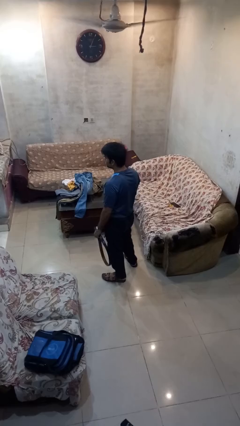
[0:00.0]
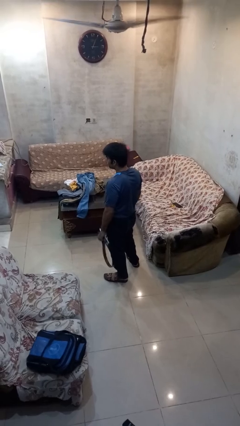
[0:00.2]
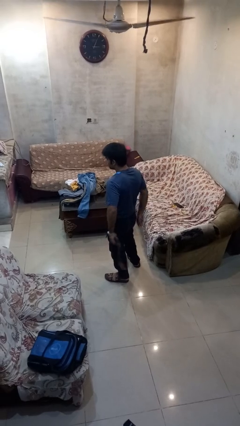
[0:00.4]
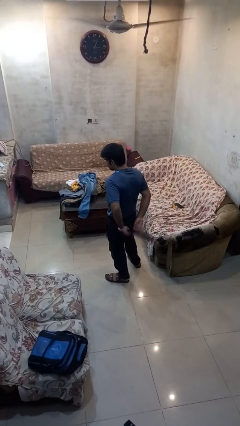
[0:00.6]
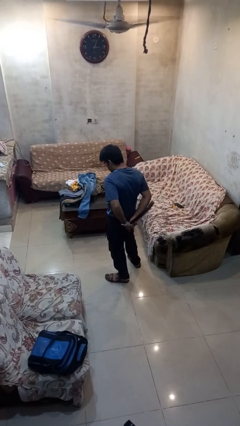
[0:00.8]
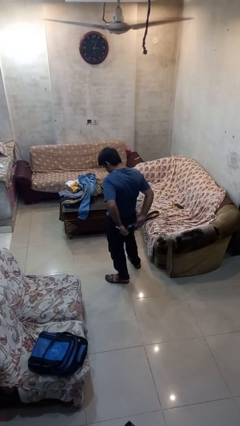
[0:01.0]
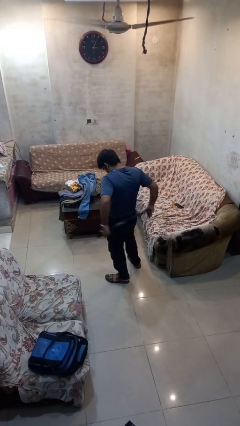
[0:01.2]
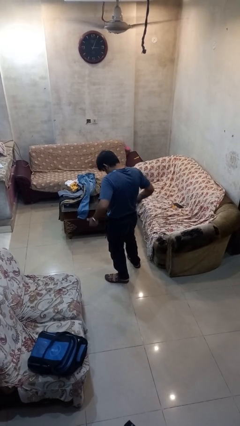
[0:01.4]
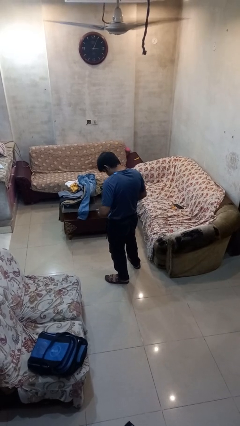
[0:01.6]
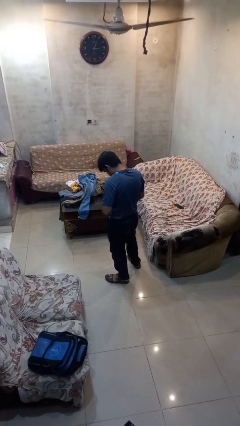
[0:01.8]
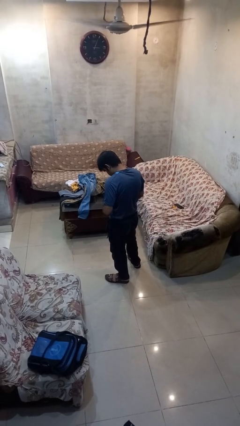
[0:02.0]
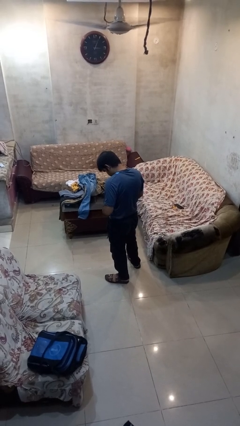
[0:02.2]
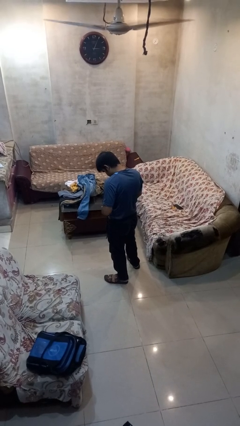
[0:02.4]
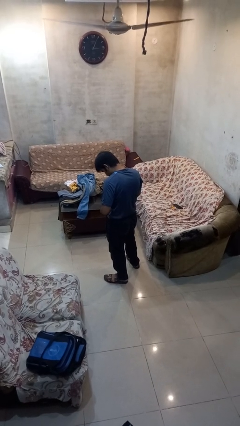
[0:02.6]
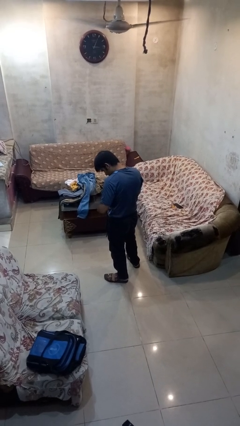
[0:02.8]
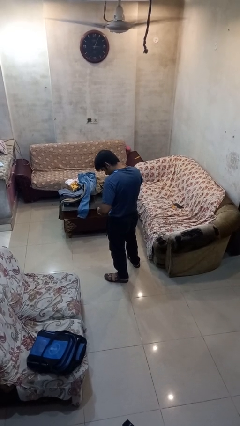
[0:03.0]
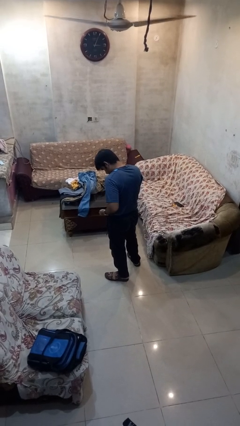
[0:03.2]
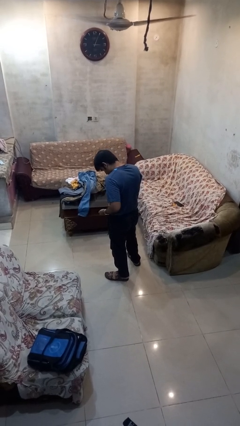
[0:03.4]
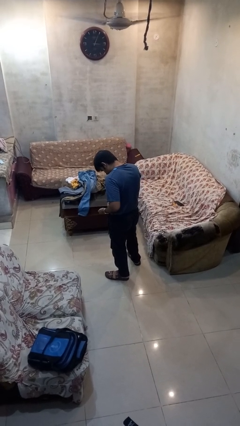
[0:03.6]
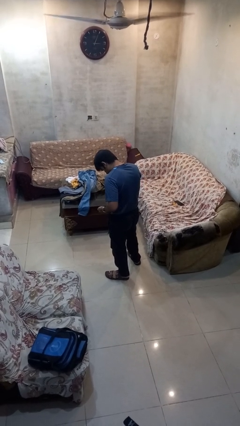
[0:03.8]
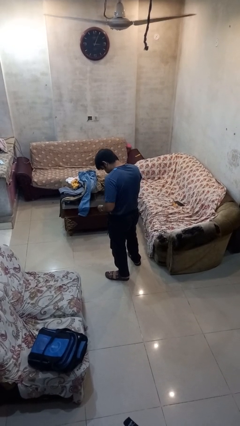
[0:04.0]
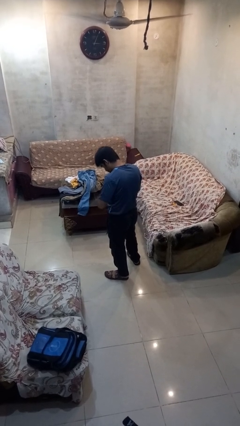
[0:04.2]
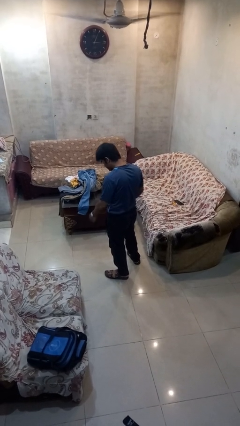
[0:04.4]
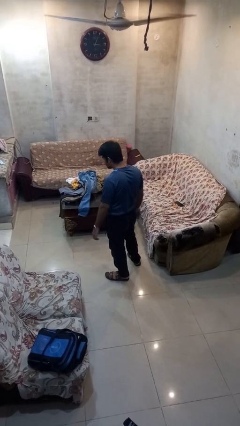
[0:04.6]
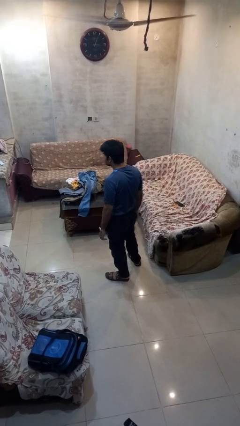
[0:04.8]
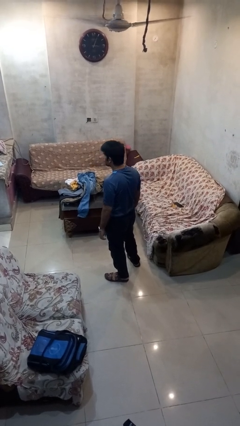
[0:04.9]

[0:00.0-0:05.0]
person puts on belt

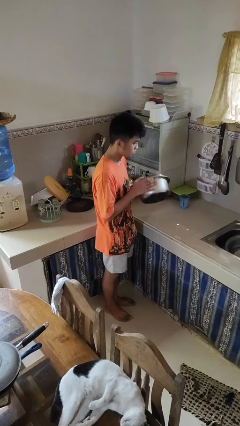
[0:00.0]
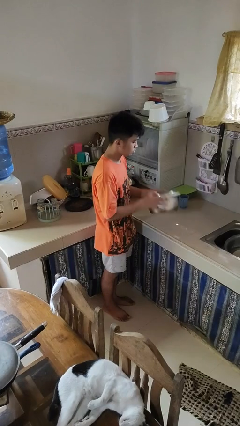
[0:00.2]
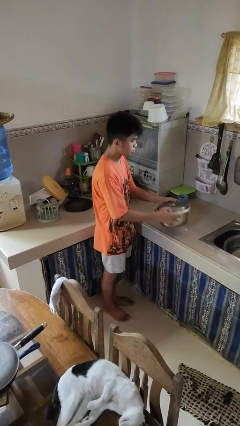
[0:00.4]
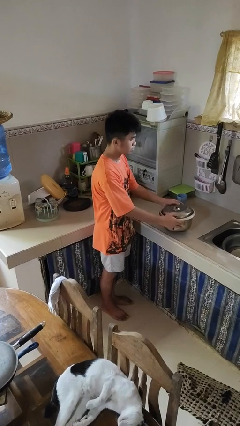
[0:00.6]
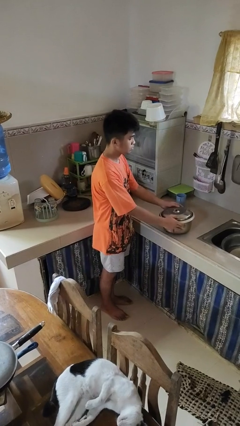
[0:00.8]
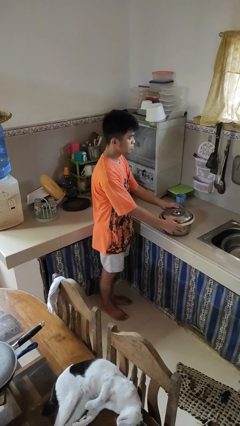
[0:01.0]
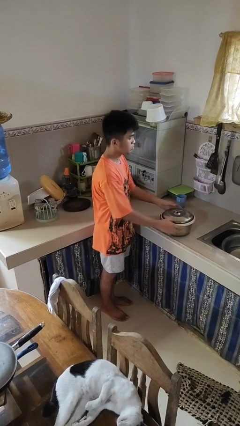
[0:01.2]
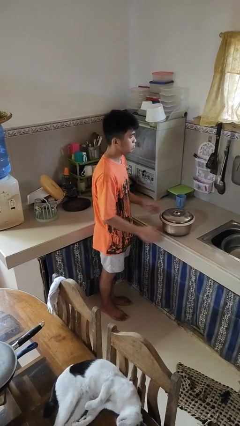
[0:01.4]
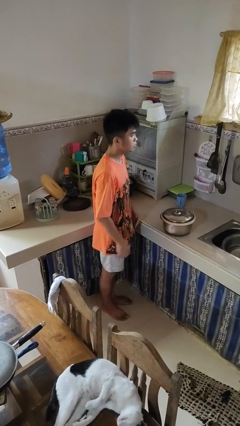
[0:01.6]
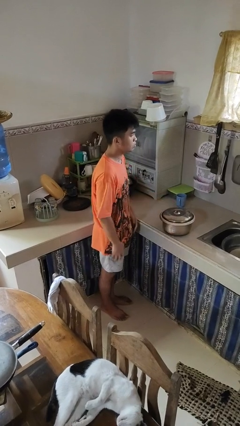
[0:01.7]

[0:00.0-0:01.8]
person puts down object on countertop

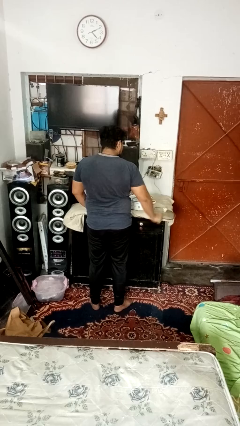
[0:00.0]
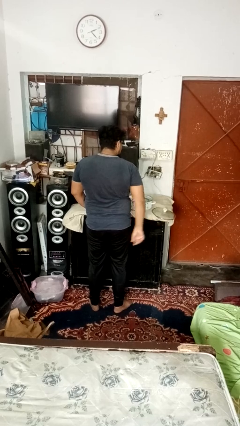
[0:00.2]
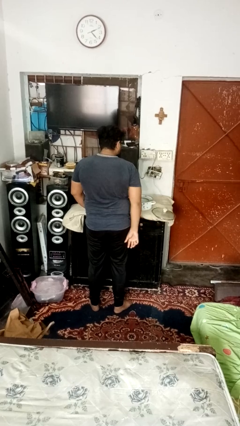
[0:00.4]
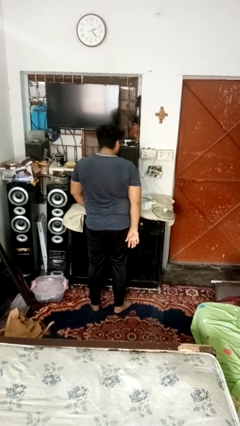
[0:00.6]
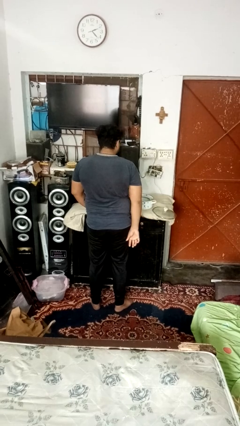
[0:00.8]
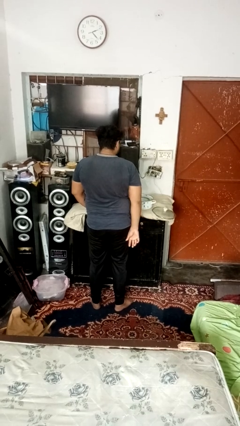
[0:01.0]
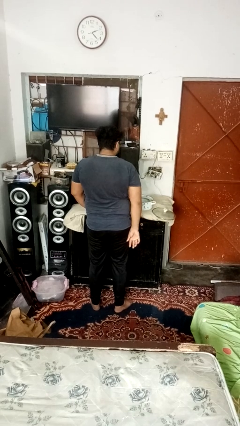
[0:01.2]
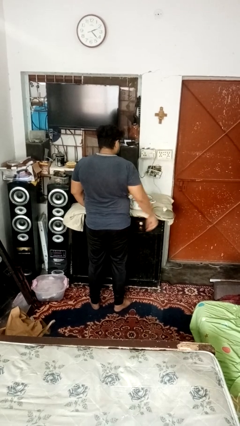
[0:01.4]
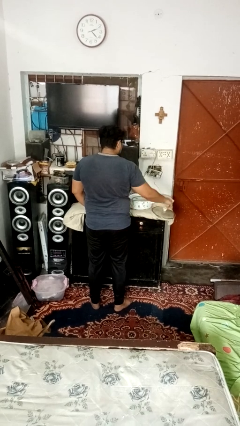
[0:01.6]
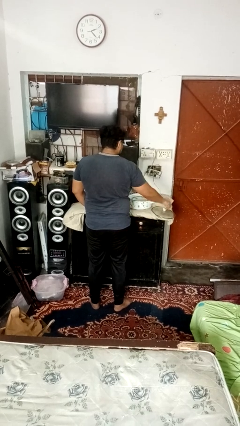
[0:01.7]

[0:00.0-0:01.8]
person closes jar

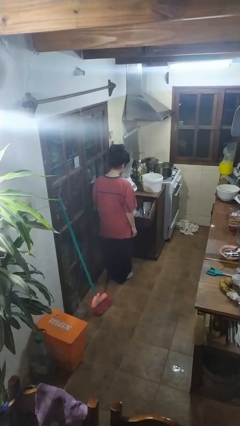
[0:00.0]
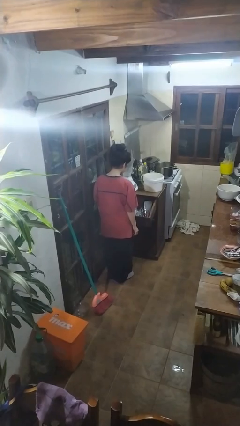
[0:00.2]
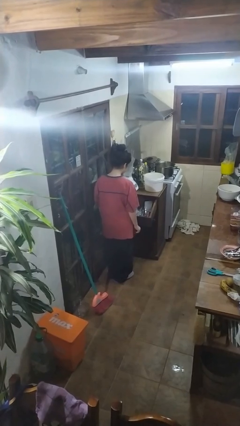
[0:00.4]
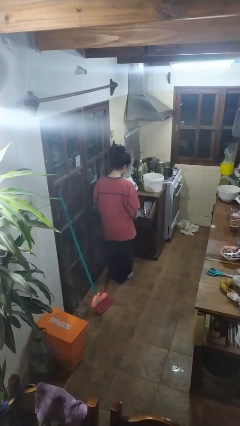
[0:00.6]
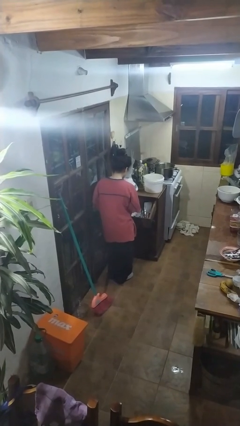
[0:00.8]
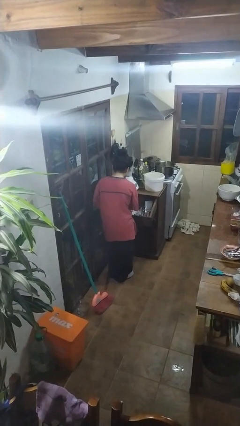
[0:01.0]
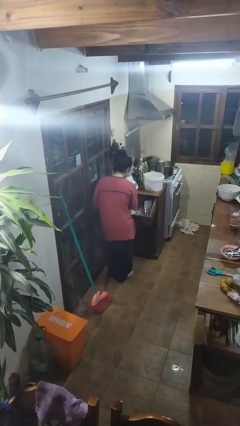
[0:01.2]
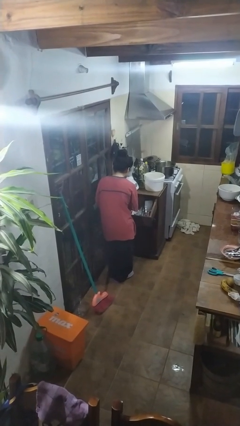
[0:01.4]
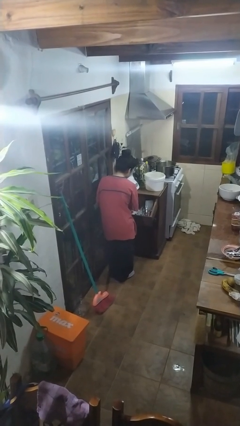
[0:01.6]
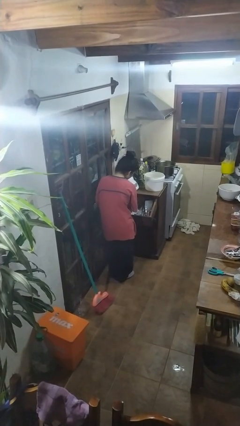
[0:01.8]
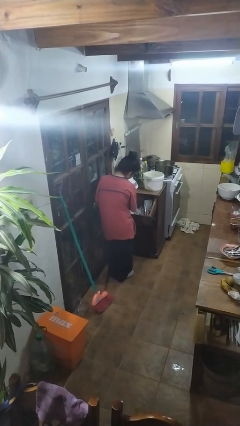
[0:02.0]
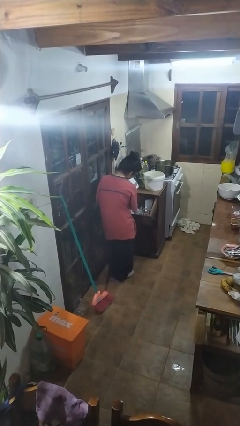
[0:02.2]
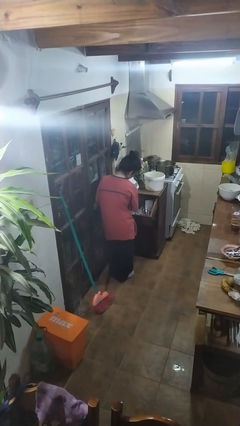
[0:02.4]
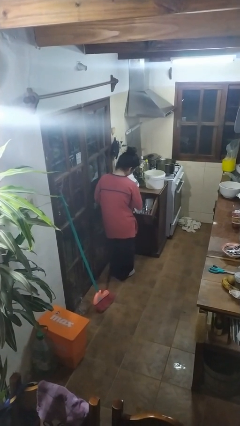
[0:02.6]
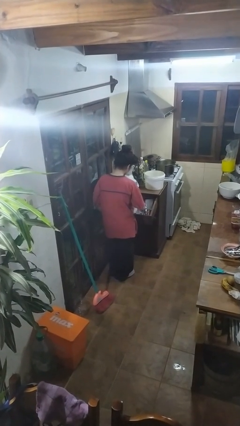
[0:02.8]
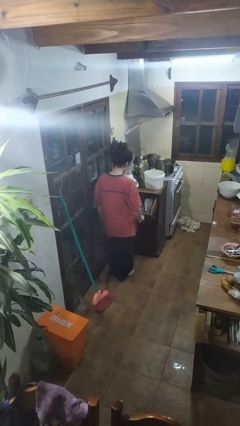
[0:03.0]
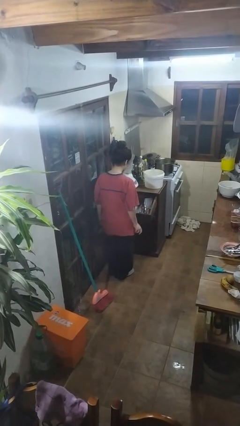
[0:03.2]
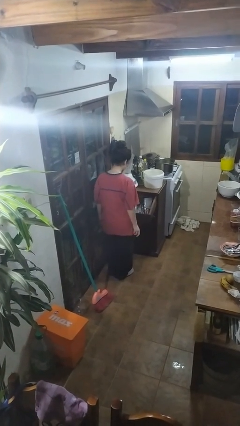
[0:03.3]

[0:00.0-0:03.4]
person searches in kitchen drawer

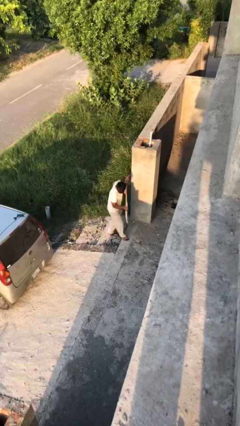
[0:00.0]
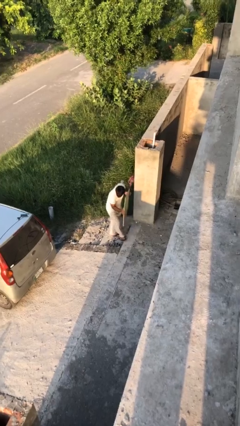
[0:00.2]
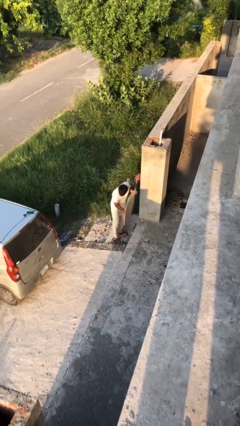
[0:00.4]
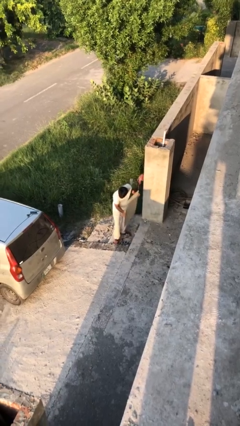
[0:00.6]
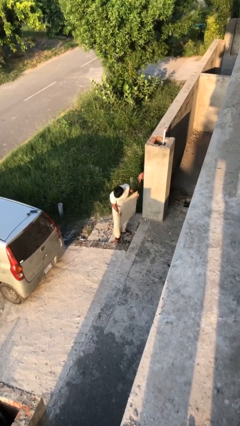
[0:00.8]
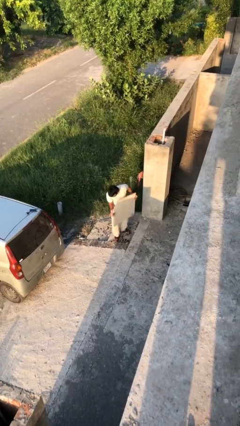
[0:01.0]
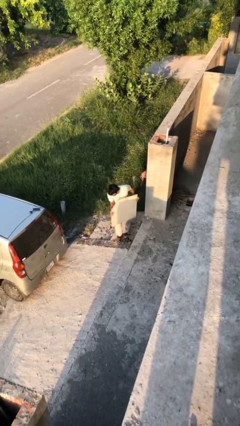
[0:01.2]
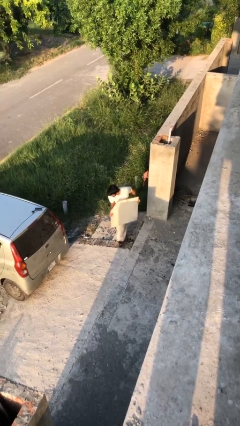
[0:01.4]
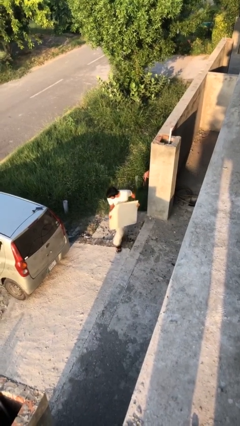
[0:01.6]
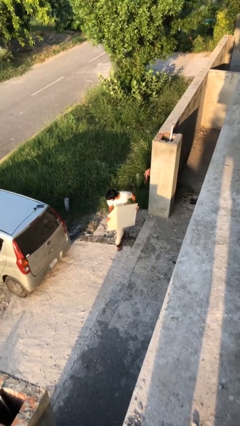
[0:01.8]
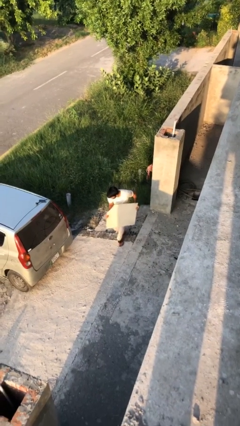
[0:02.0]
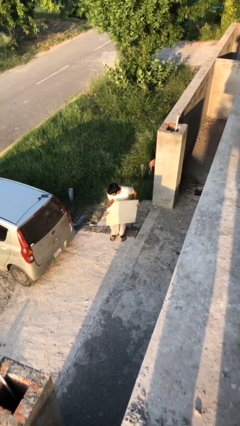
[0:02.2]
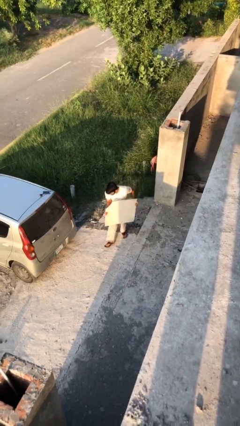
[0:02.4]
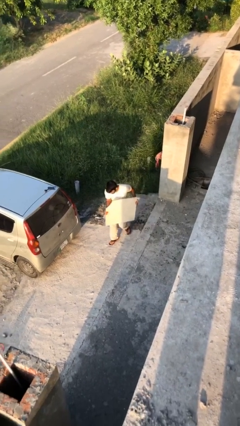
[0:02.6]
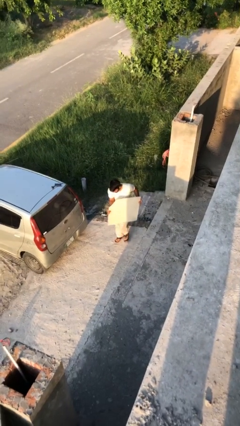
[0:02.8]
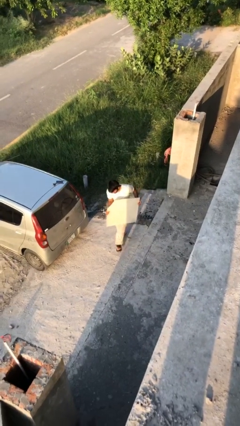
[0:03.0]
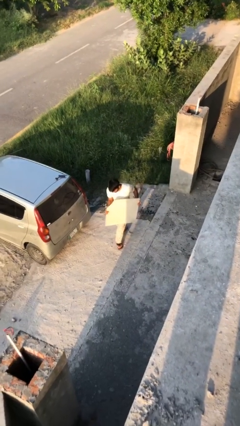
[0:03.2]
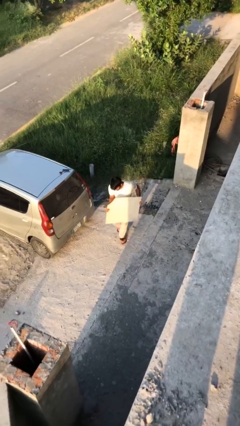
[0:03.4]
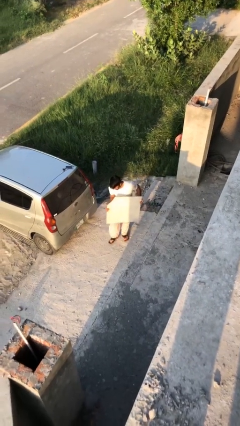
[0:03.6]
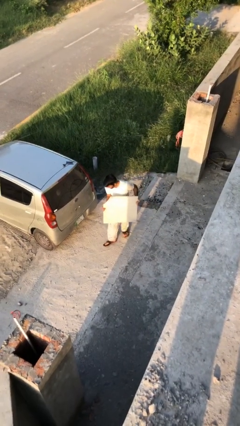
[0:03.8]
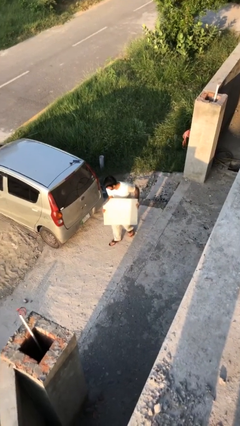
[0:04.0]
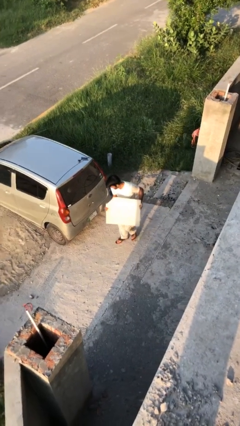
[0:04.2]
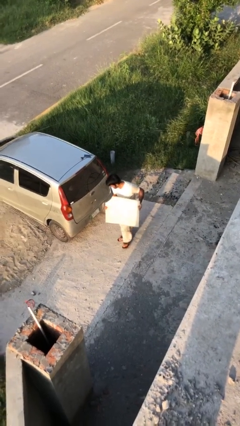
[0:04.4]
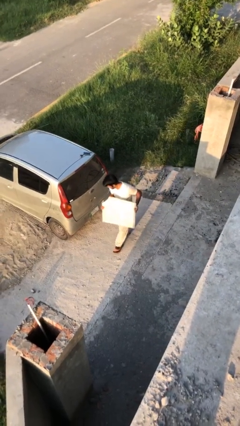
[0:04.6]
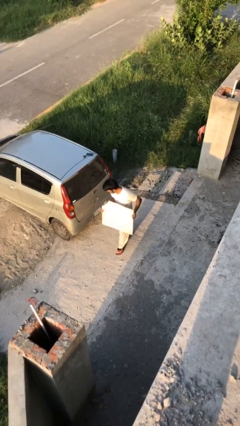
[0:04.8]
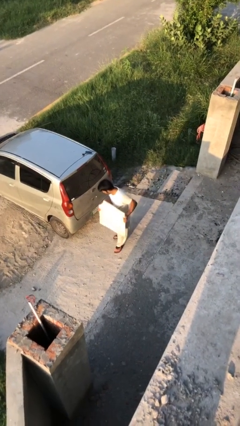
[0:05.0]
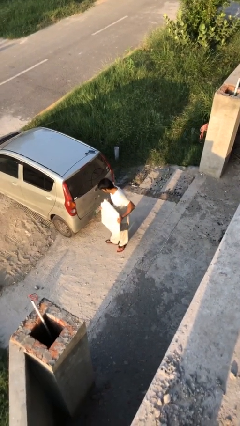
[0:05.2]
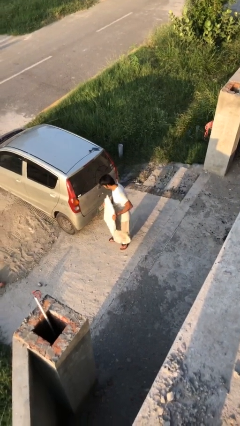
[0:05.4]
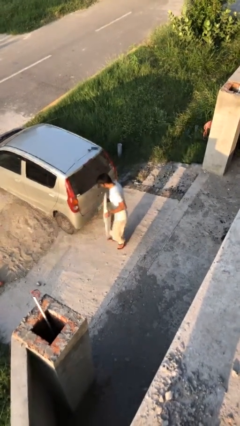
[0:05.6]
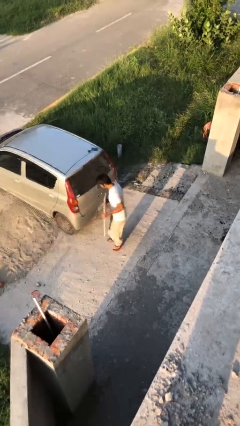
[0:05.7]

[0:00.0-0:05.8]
person carries heavy object
